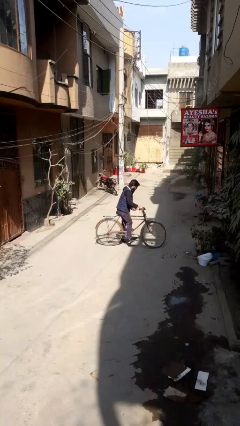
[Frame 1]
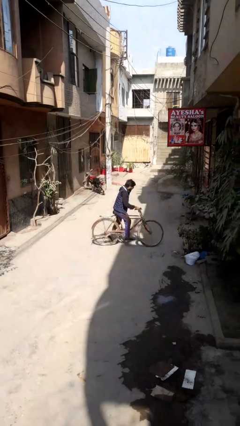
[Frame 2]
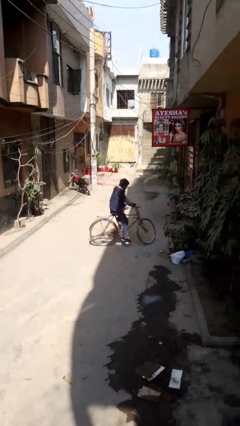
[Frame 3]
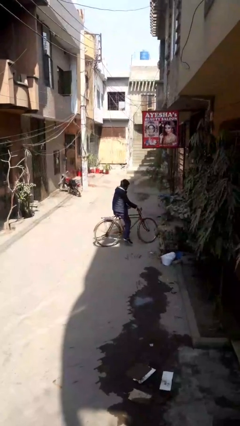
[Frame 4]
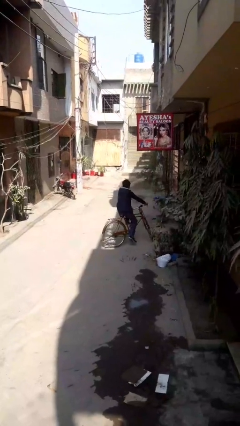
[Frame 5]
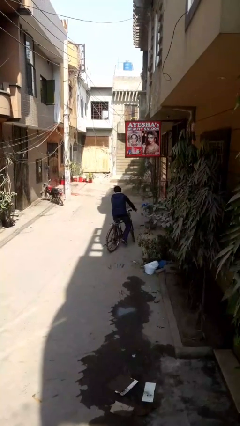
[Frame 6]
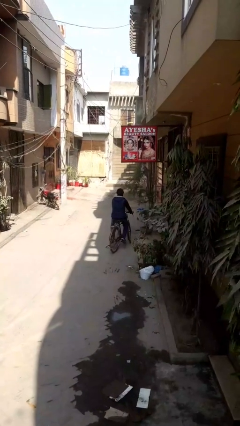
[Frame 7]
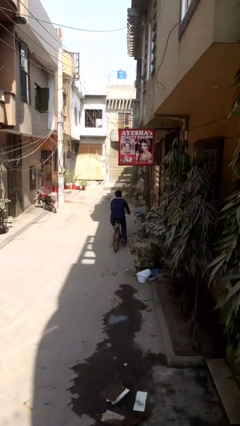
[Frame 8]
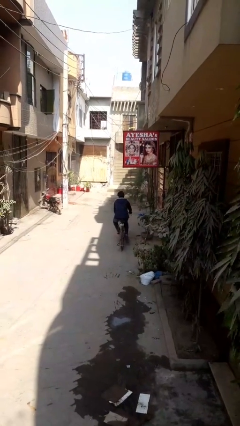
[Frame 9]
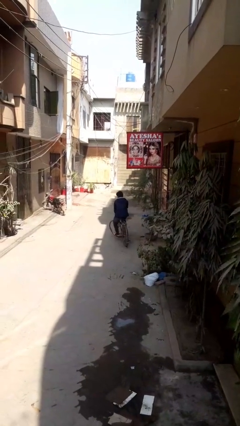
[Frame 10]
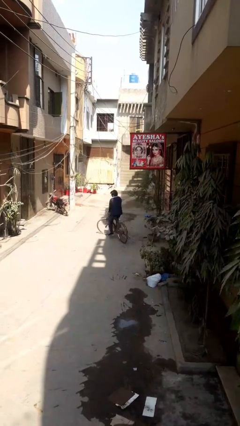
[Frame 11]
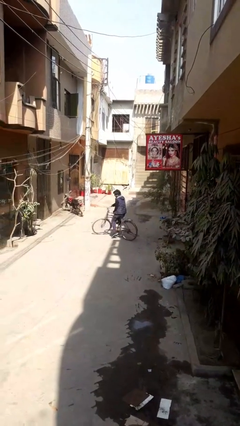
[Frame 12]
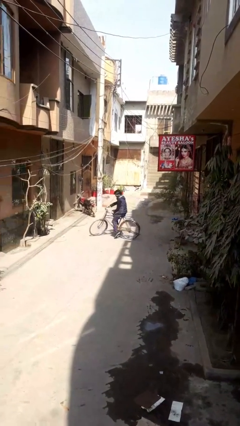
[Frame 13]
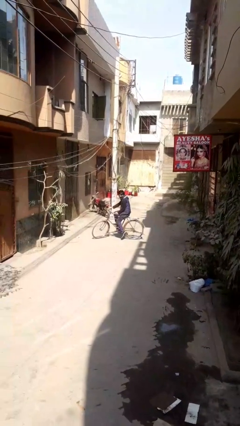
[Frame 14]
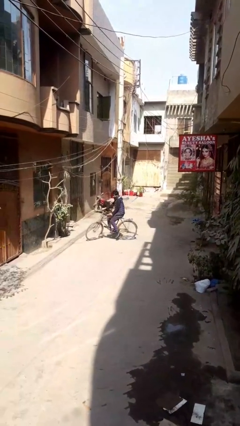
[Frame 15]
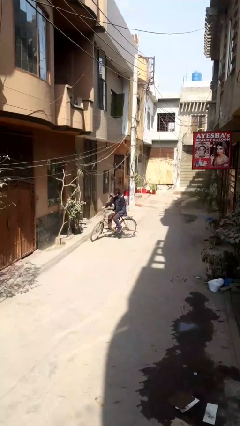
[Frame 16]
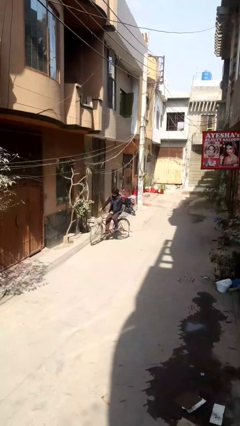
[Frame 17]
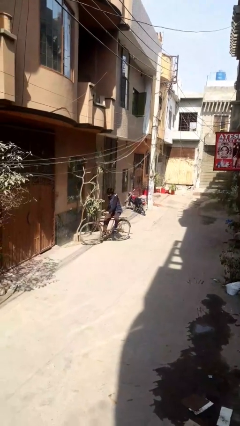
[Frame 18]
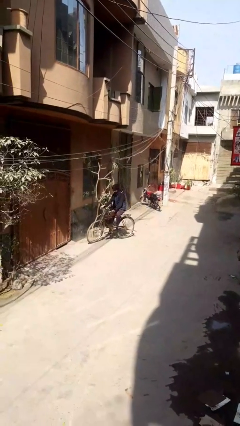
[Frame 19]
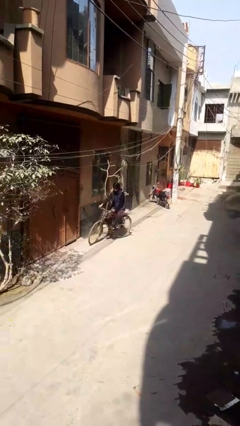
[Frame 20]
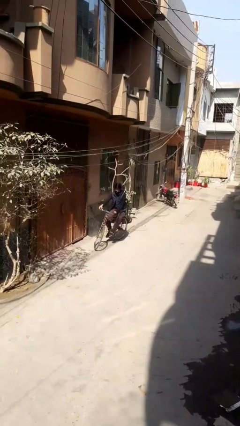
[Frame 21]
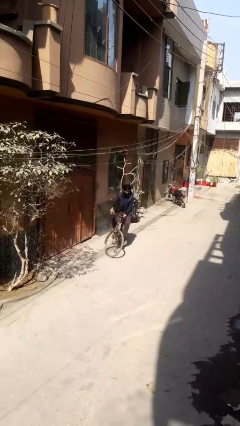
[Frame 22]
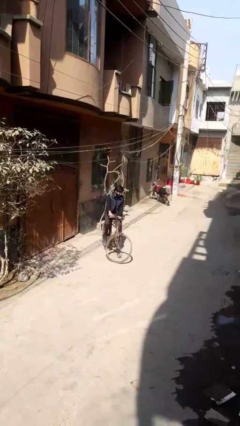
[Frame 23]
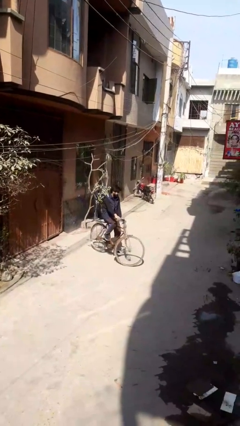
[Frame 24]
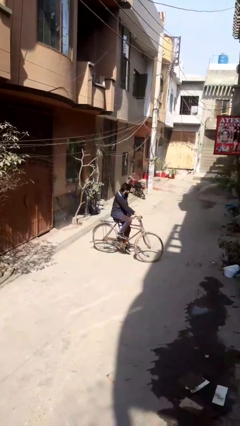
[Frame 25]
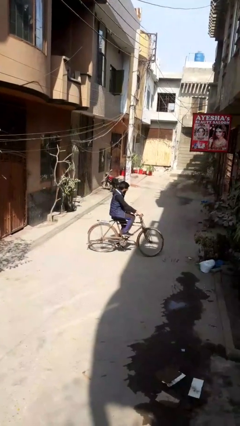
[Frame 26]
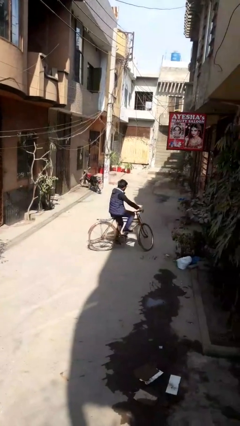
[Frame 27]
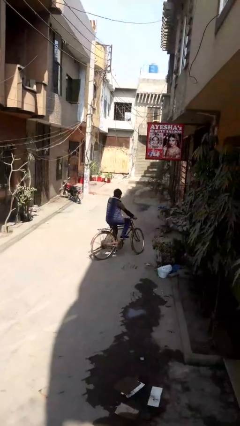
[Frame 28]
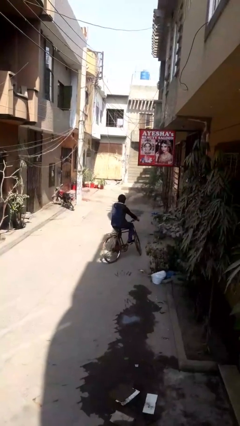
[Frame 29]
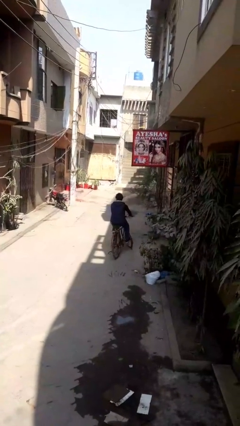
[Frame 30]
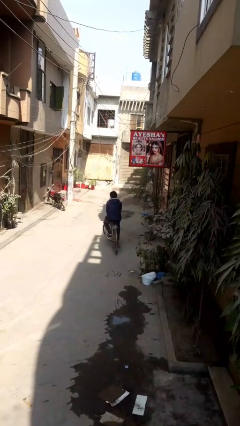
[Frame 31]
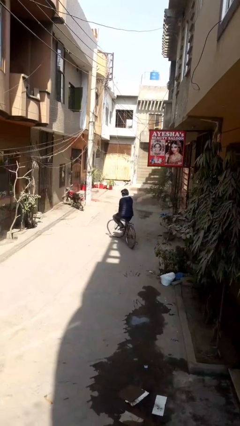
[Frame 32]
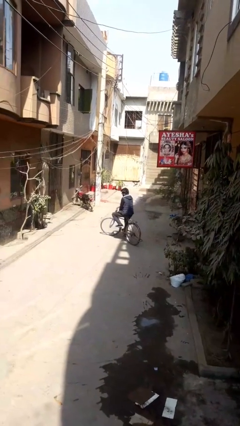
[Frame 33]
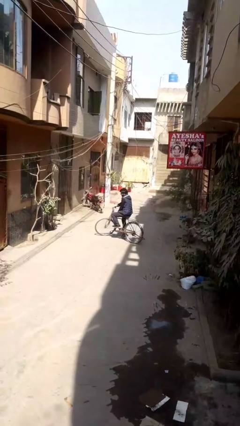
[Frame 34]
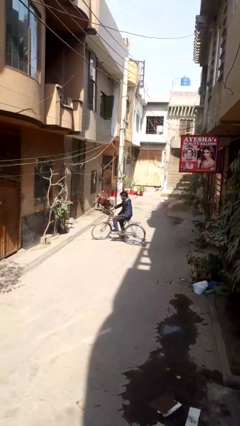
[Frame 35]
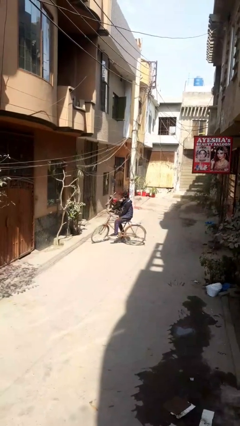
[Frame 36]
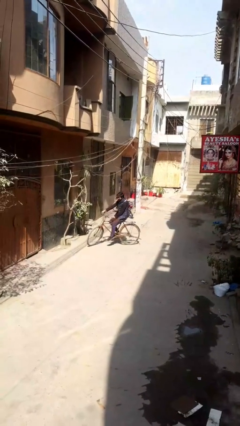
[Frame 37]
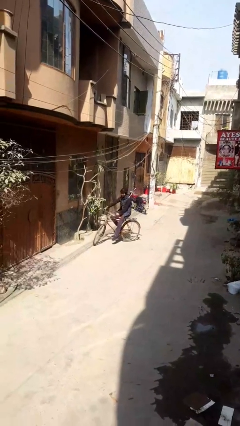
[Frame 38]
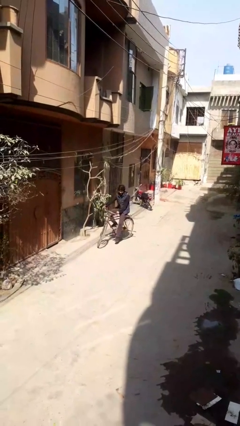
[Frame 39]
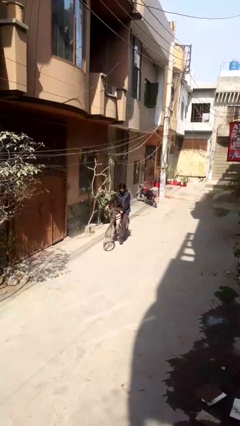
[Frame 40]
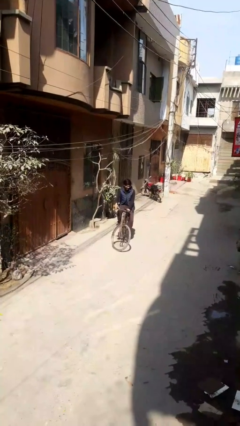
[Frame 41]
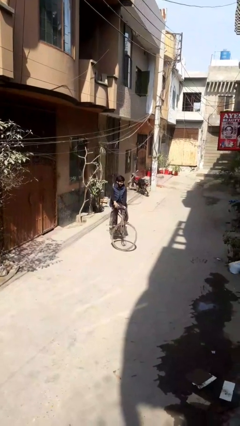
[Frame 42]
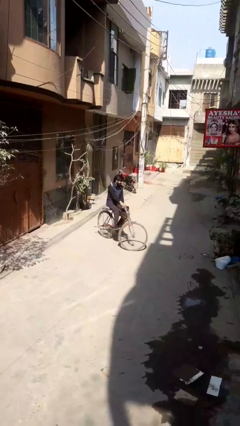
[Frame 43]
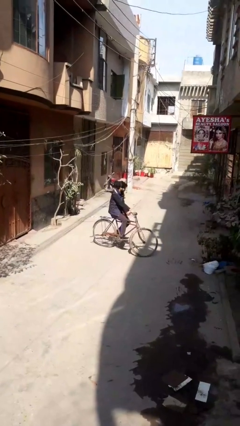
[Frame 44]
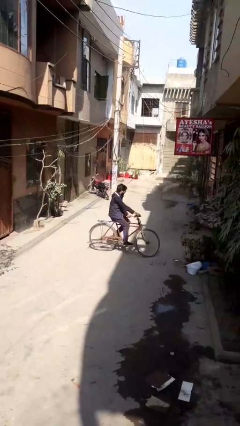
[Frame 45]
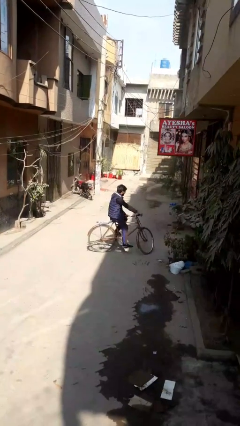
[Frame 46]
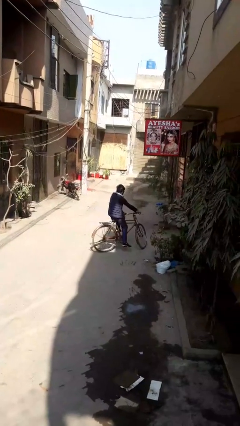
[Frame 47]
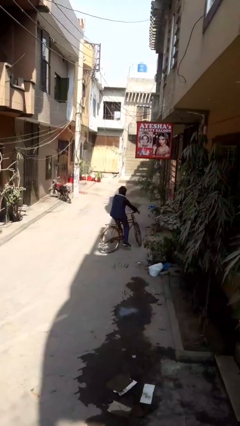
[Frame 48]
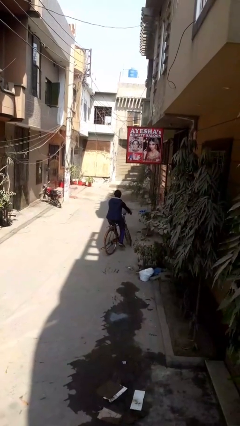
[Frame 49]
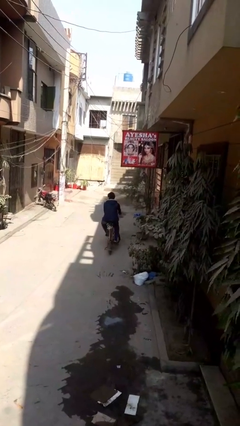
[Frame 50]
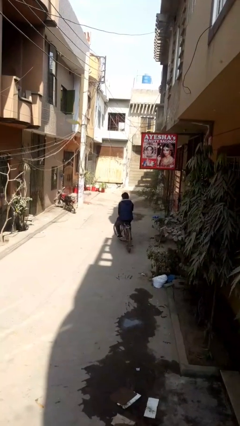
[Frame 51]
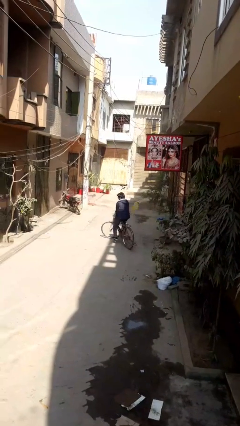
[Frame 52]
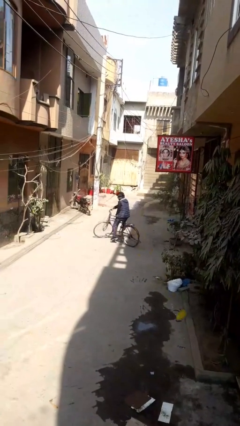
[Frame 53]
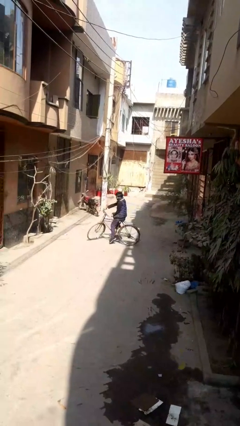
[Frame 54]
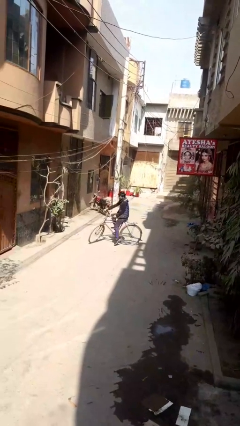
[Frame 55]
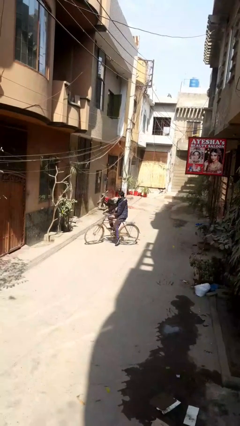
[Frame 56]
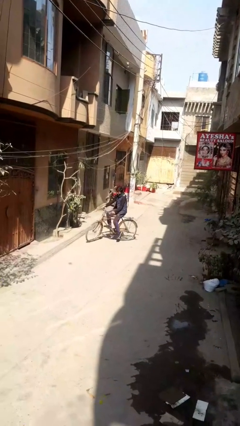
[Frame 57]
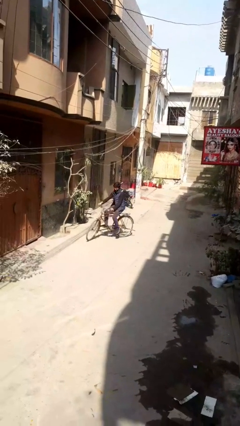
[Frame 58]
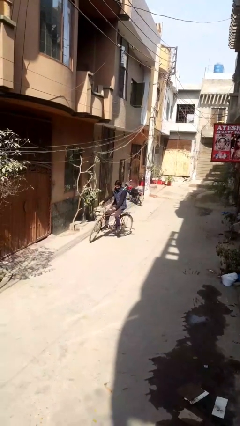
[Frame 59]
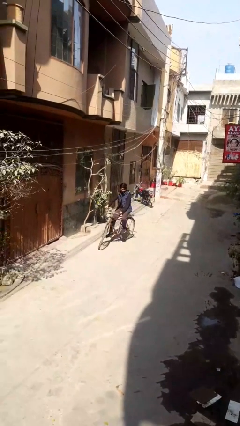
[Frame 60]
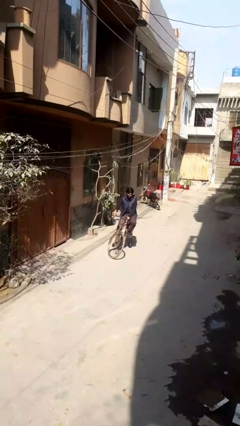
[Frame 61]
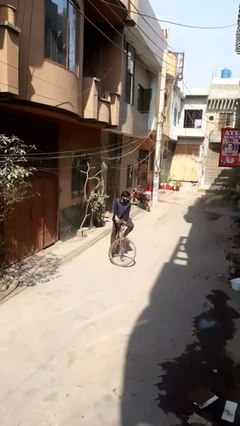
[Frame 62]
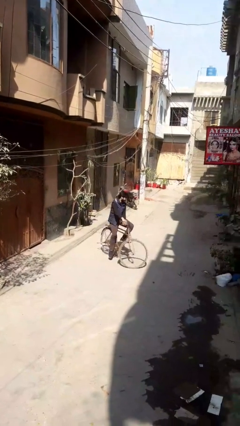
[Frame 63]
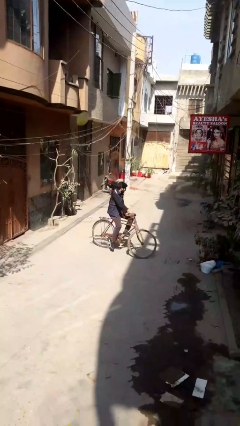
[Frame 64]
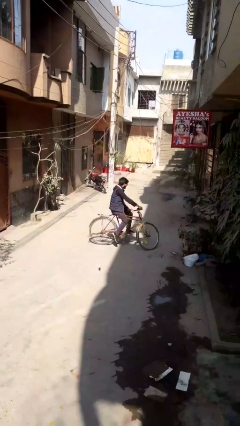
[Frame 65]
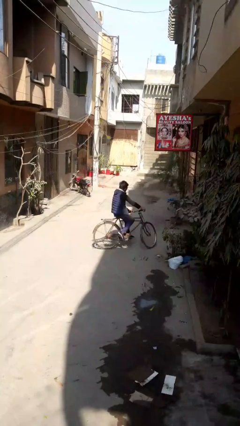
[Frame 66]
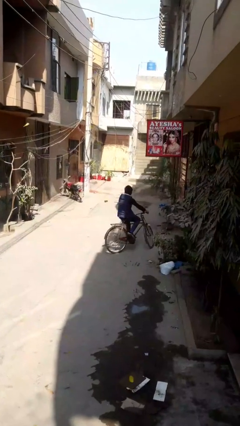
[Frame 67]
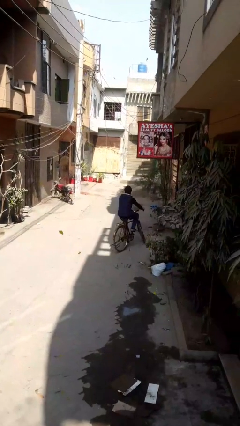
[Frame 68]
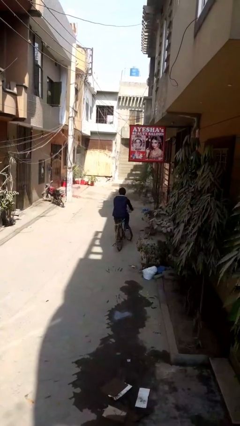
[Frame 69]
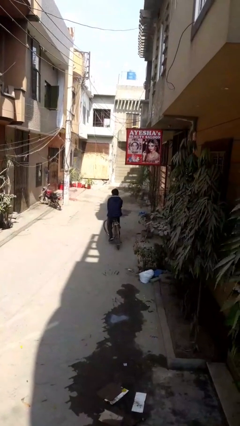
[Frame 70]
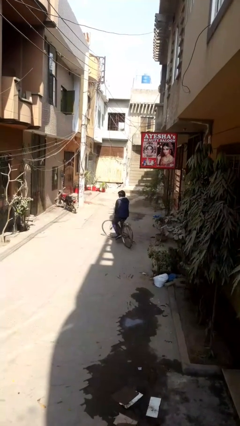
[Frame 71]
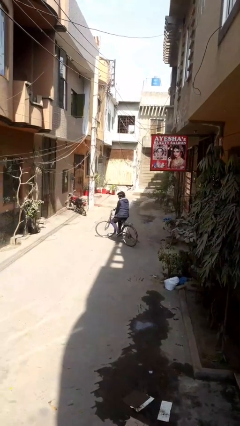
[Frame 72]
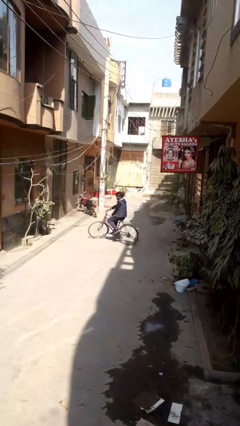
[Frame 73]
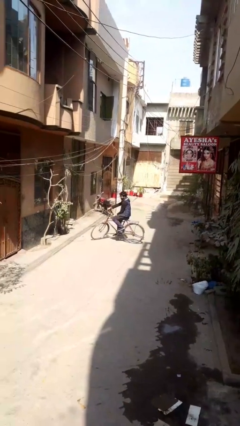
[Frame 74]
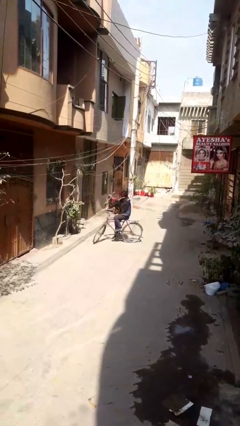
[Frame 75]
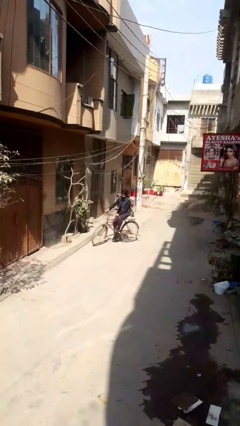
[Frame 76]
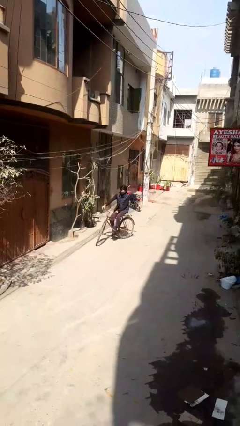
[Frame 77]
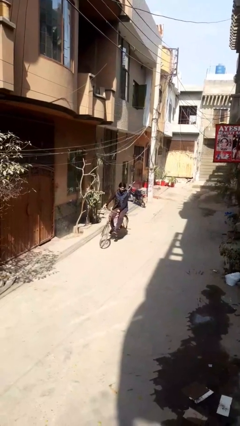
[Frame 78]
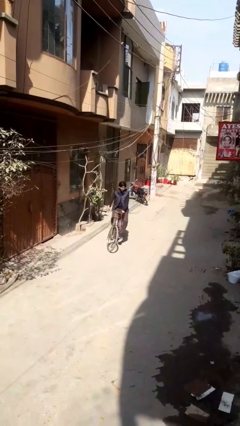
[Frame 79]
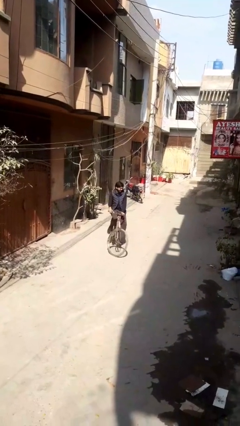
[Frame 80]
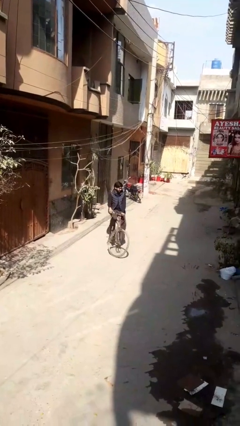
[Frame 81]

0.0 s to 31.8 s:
person rides bicycle

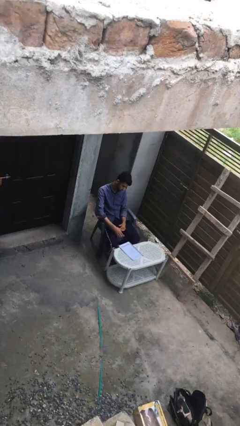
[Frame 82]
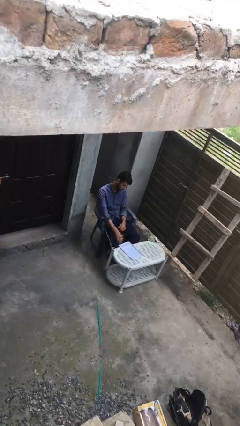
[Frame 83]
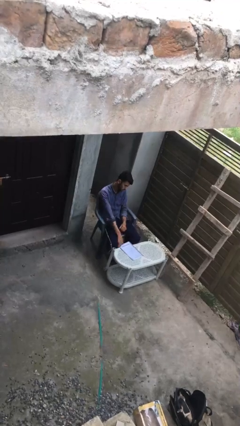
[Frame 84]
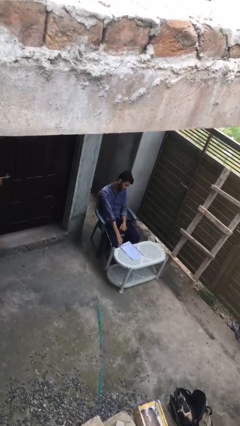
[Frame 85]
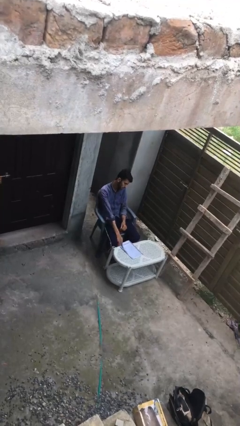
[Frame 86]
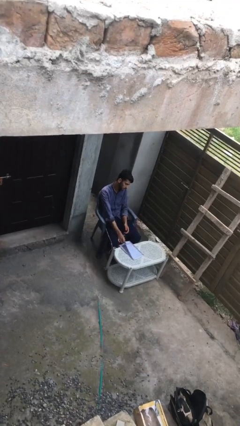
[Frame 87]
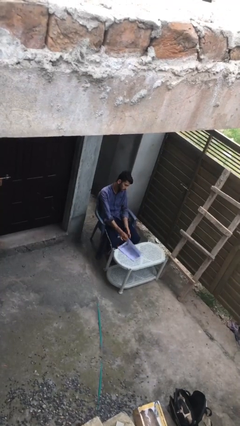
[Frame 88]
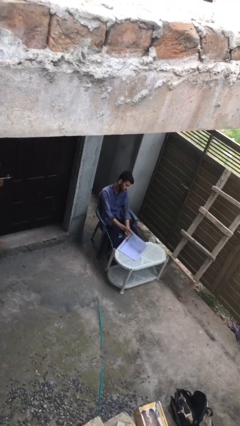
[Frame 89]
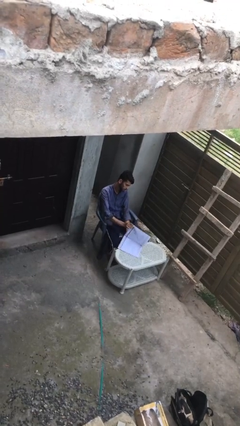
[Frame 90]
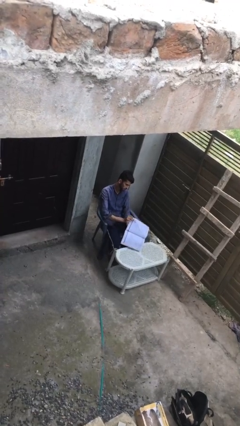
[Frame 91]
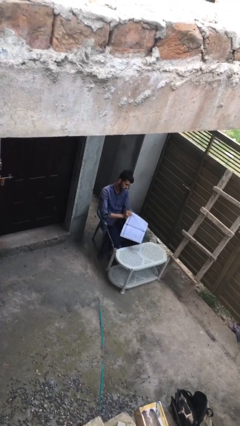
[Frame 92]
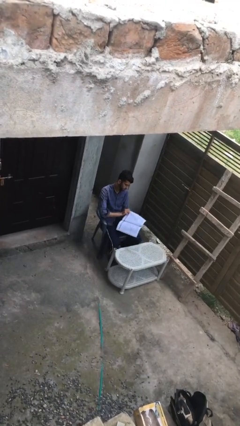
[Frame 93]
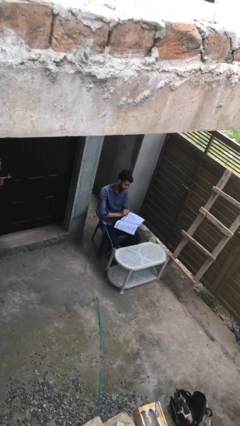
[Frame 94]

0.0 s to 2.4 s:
person picks up object from table
